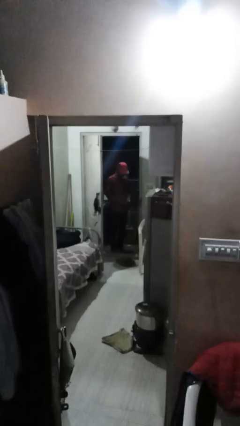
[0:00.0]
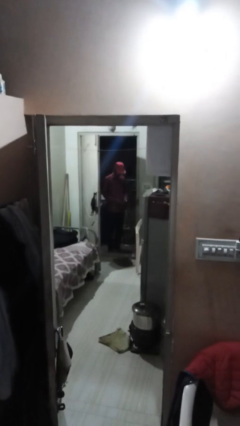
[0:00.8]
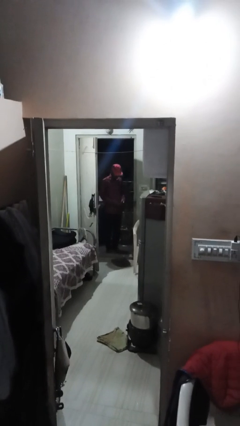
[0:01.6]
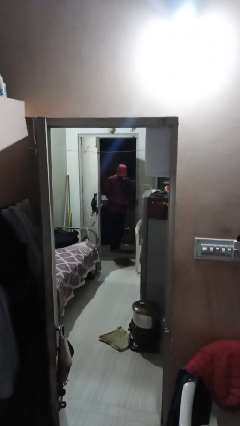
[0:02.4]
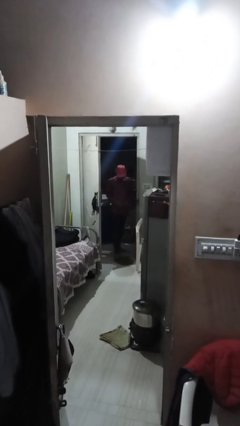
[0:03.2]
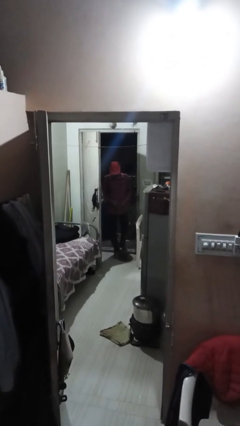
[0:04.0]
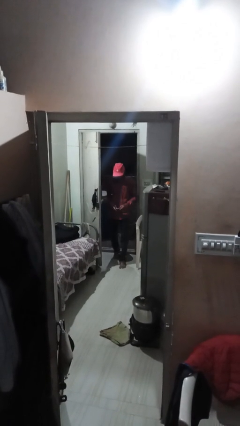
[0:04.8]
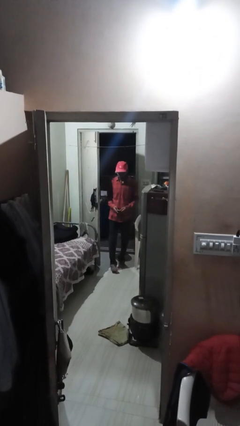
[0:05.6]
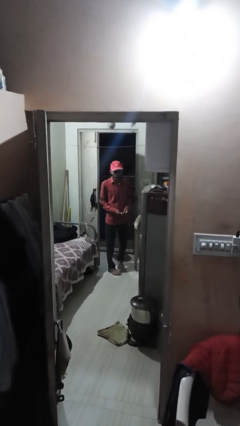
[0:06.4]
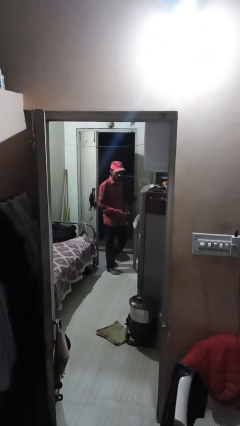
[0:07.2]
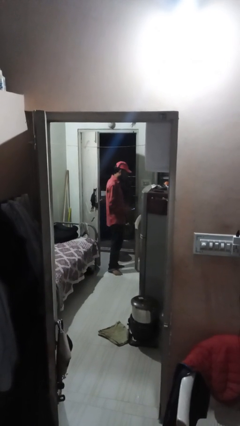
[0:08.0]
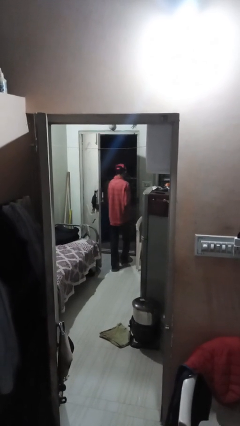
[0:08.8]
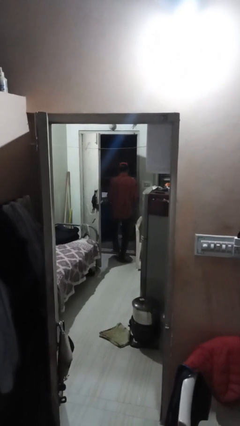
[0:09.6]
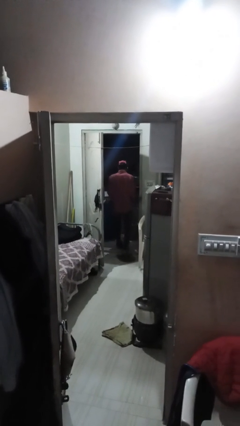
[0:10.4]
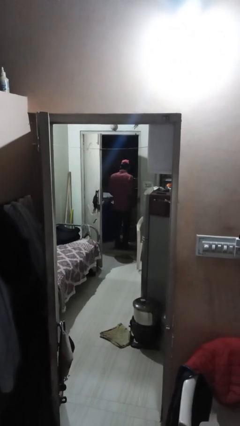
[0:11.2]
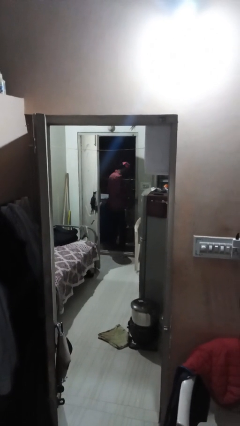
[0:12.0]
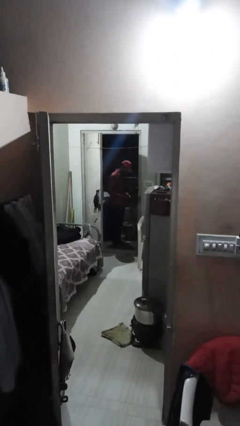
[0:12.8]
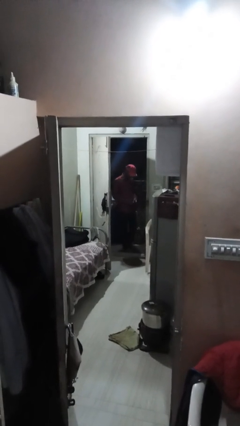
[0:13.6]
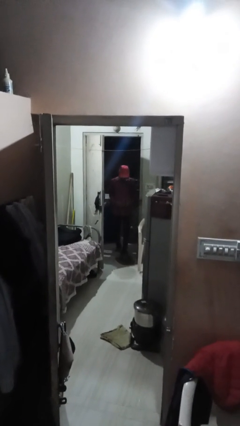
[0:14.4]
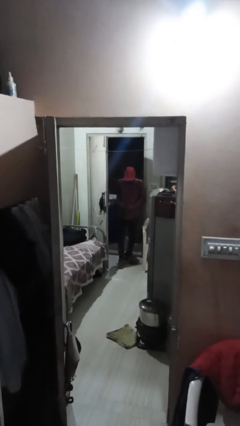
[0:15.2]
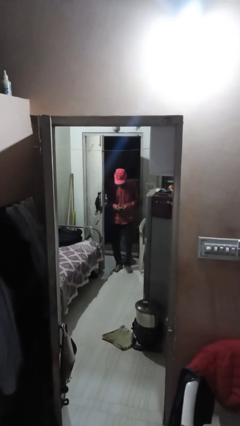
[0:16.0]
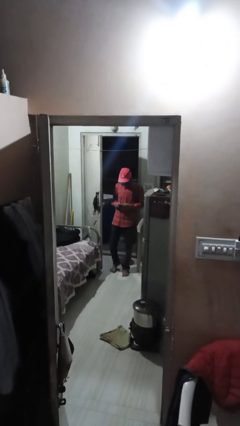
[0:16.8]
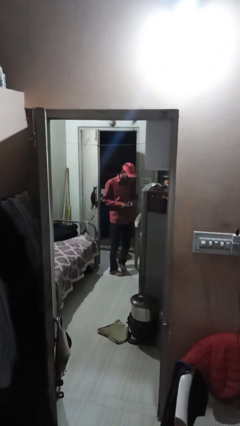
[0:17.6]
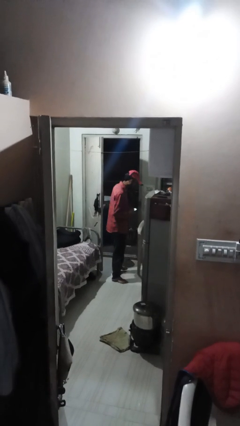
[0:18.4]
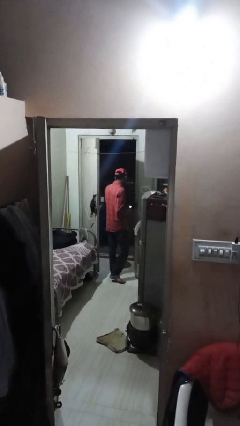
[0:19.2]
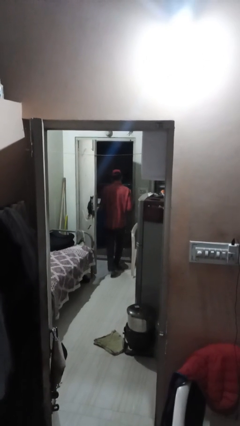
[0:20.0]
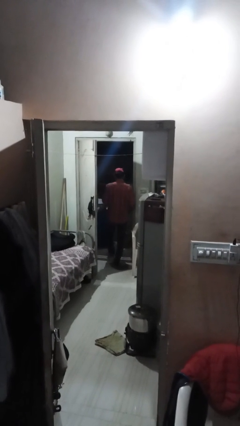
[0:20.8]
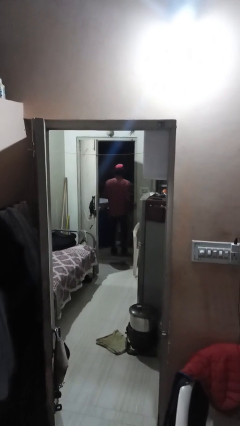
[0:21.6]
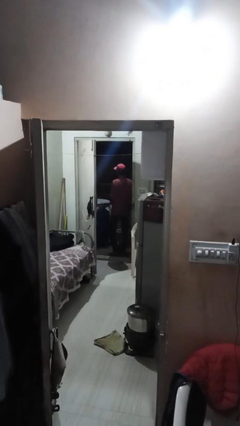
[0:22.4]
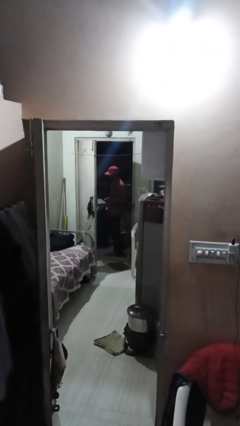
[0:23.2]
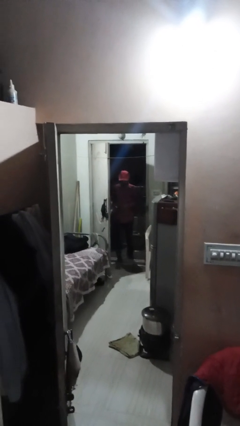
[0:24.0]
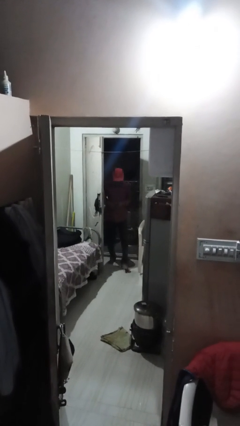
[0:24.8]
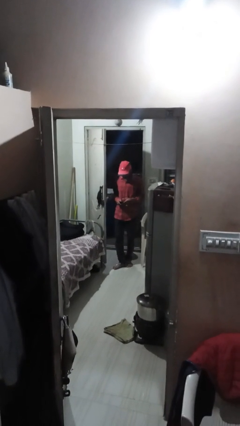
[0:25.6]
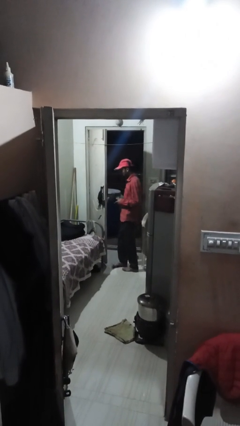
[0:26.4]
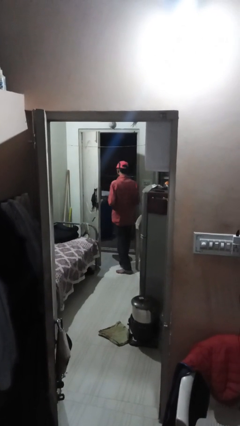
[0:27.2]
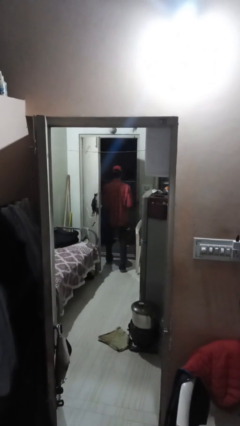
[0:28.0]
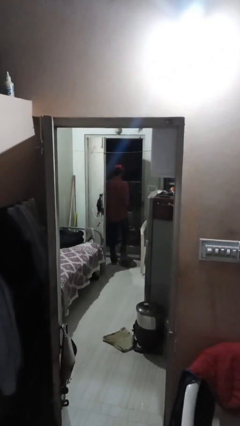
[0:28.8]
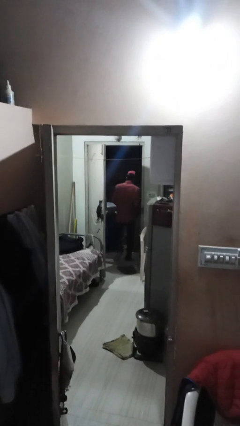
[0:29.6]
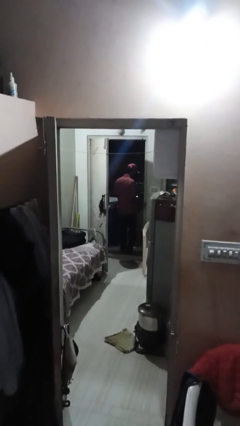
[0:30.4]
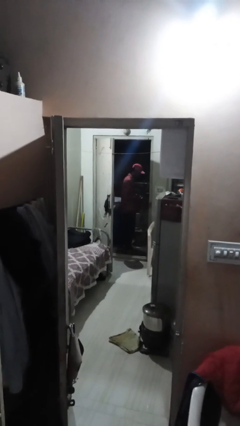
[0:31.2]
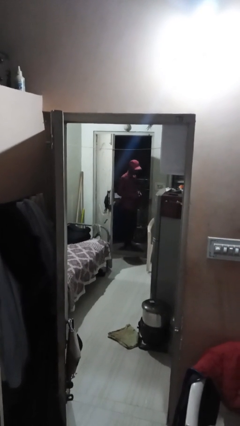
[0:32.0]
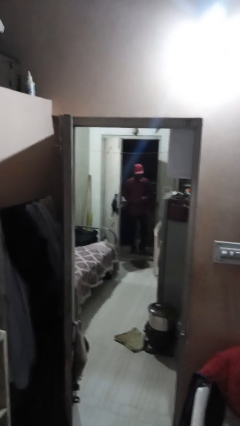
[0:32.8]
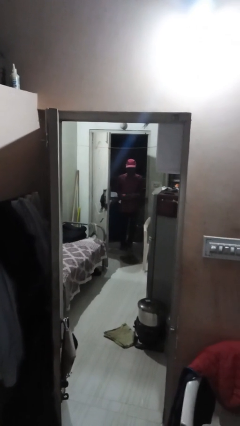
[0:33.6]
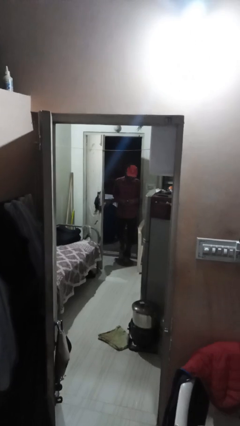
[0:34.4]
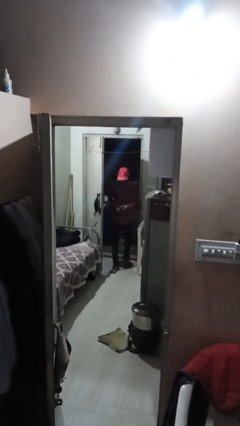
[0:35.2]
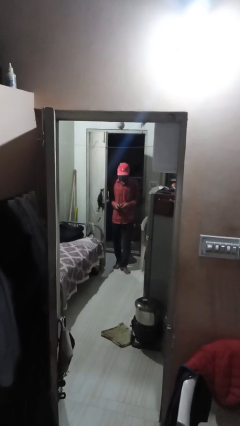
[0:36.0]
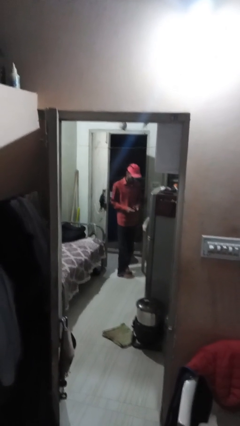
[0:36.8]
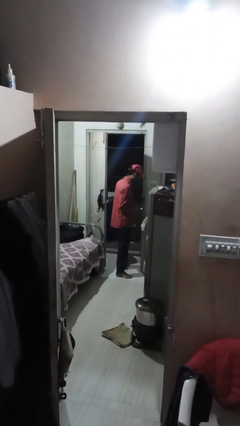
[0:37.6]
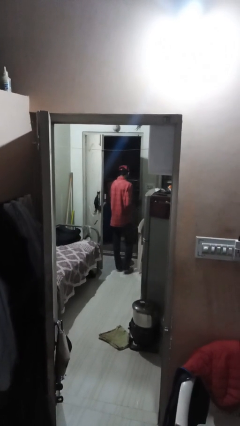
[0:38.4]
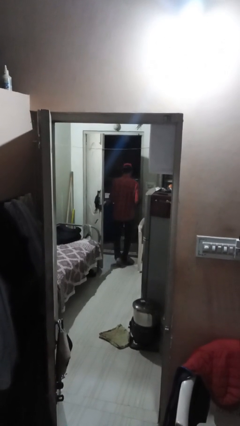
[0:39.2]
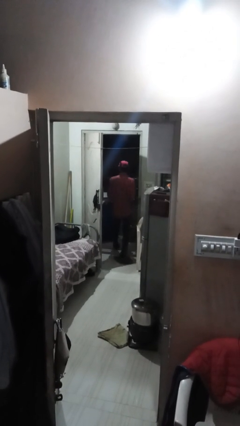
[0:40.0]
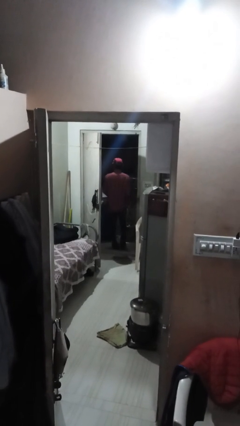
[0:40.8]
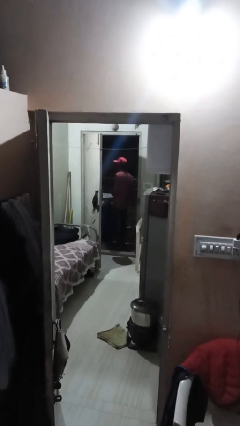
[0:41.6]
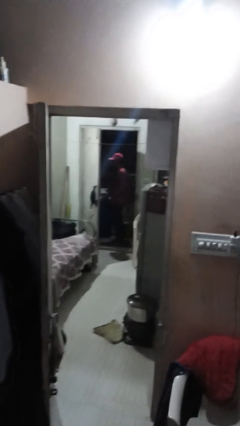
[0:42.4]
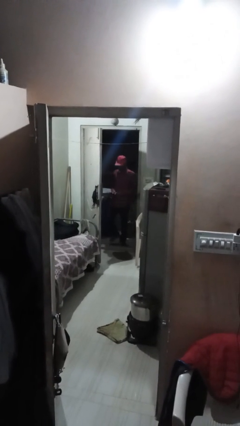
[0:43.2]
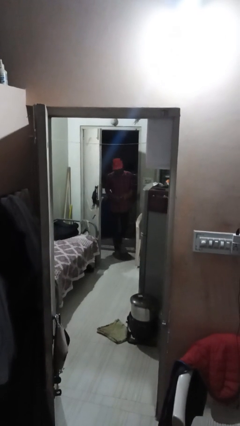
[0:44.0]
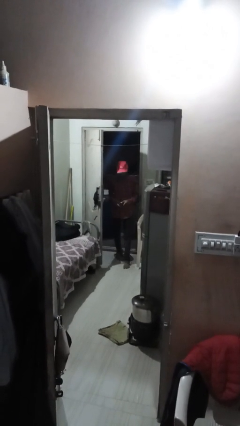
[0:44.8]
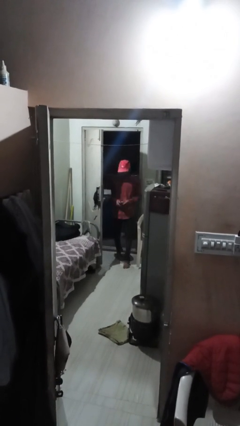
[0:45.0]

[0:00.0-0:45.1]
person texts on phone

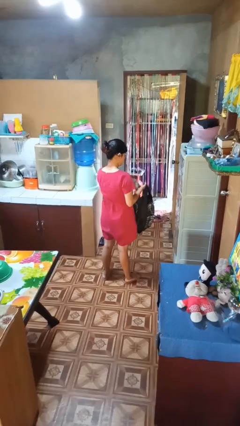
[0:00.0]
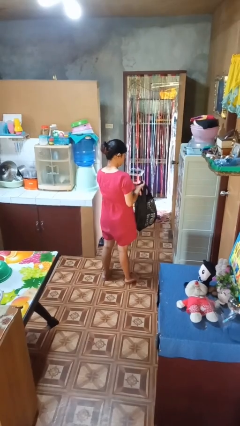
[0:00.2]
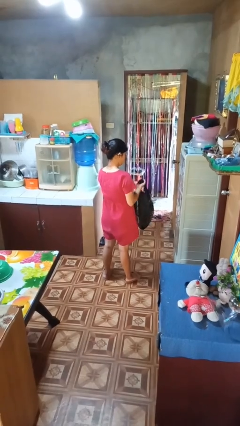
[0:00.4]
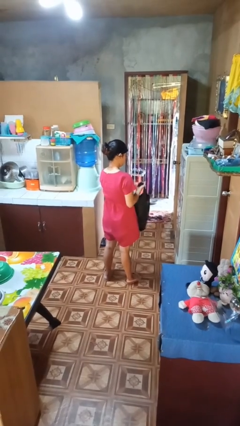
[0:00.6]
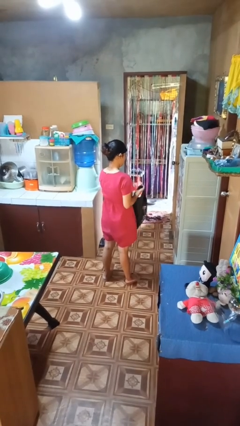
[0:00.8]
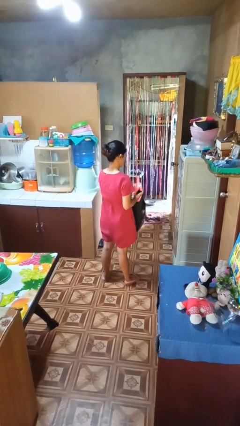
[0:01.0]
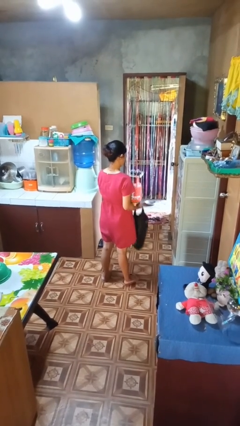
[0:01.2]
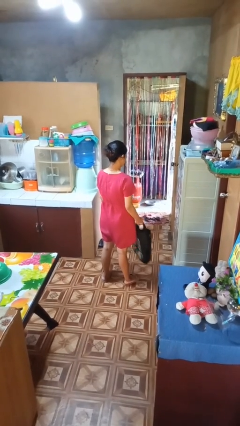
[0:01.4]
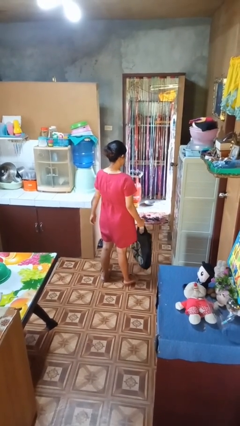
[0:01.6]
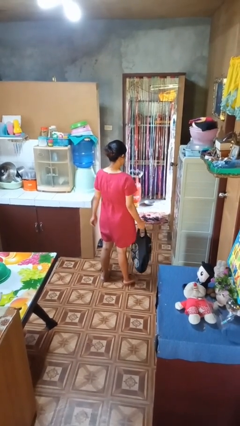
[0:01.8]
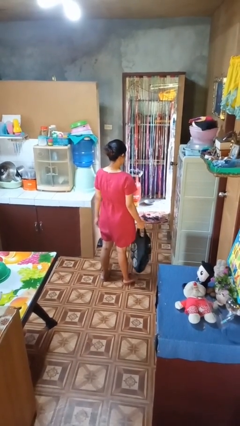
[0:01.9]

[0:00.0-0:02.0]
person puts object into bag

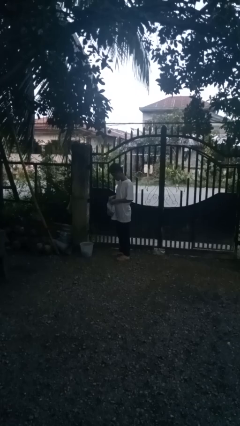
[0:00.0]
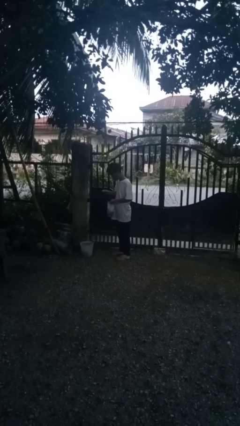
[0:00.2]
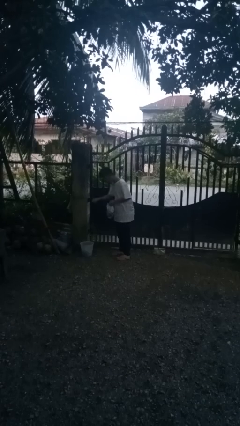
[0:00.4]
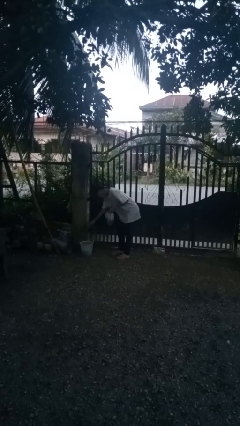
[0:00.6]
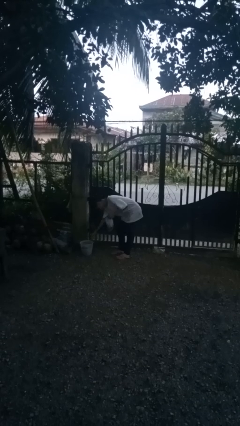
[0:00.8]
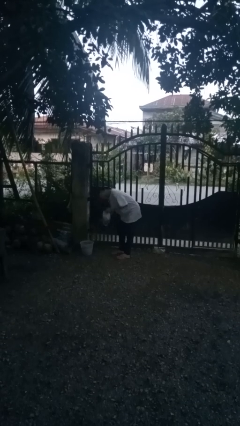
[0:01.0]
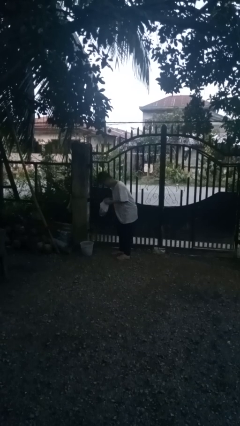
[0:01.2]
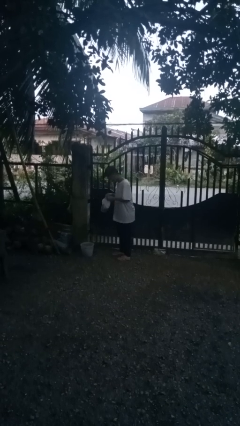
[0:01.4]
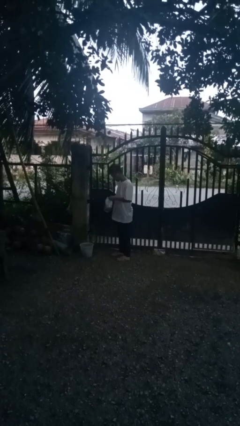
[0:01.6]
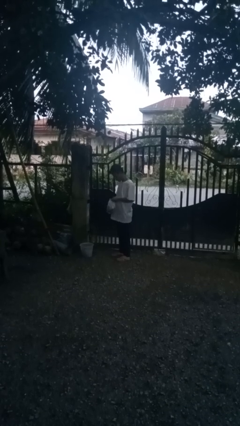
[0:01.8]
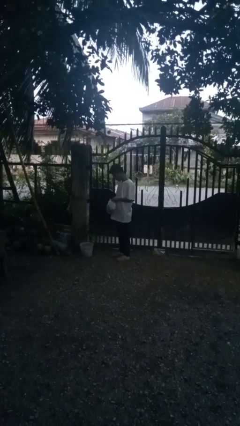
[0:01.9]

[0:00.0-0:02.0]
person discards trash

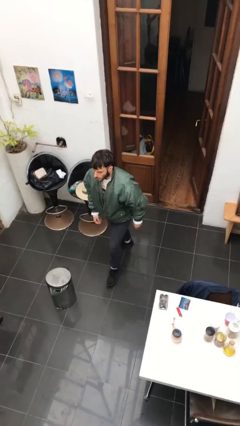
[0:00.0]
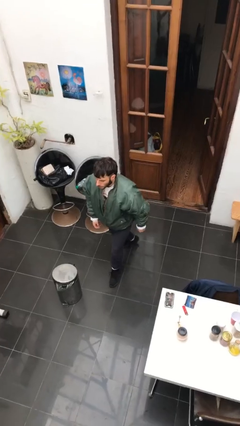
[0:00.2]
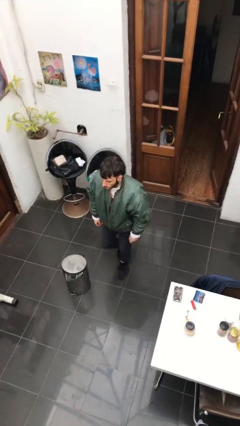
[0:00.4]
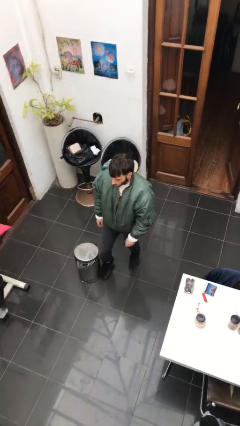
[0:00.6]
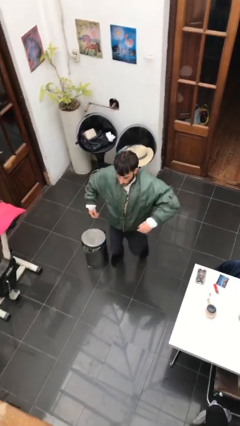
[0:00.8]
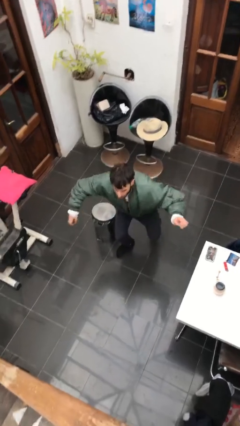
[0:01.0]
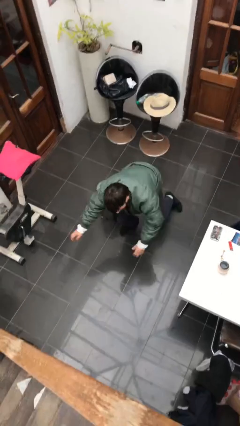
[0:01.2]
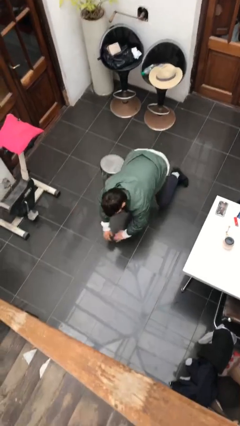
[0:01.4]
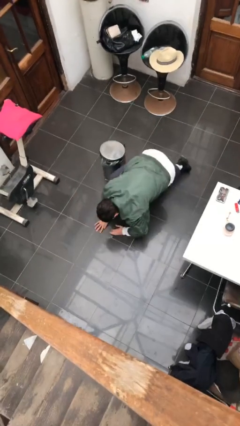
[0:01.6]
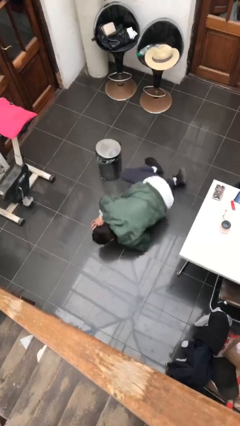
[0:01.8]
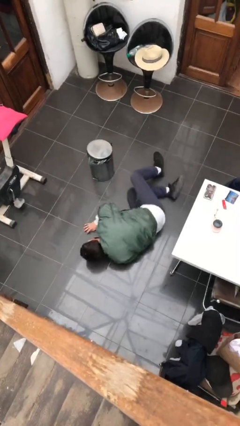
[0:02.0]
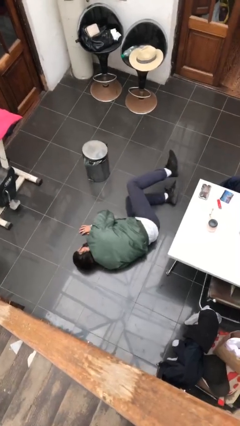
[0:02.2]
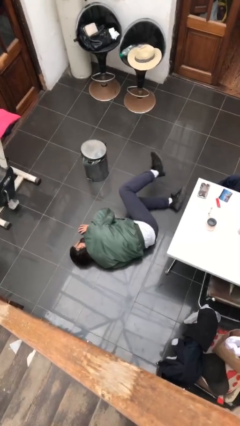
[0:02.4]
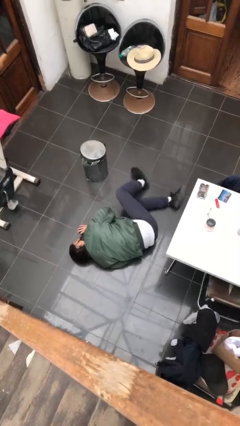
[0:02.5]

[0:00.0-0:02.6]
person trips on object on floor
